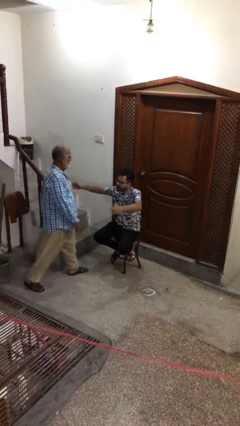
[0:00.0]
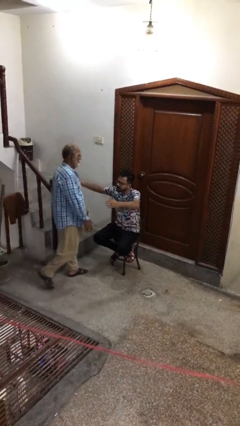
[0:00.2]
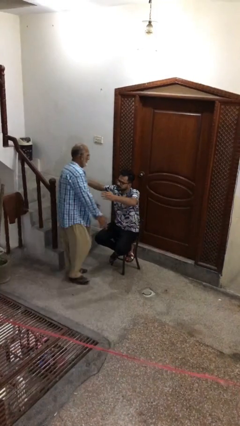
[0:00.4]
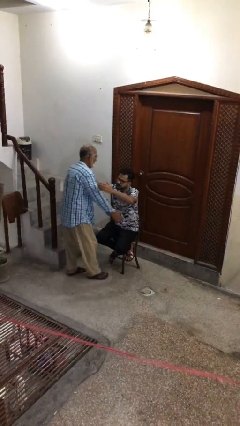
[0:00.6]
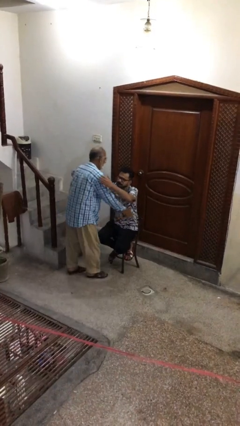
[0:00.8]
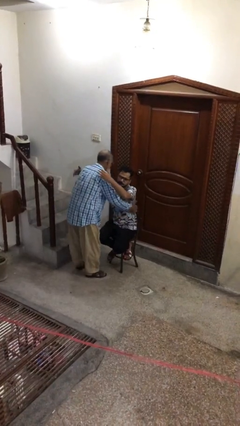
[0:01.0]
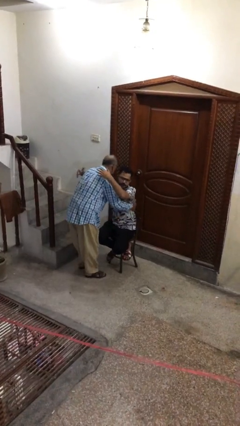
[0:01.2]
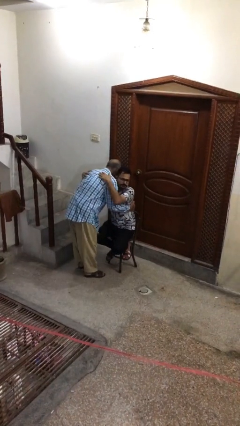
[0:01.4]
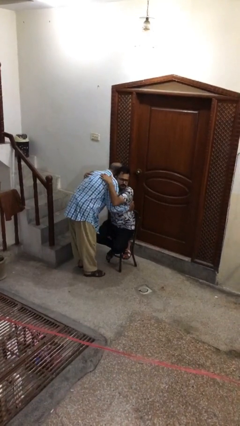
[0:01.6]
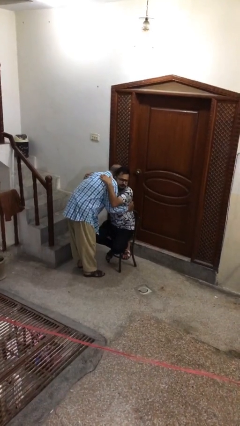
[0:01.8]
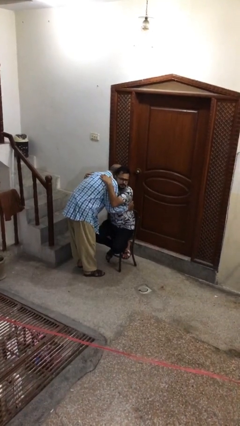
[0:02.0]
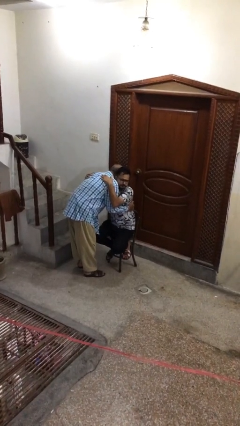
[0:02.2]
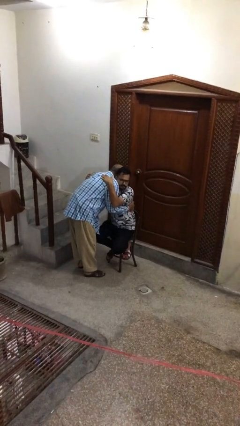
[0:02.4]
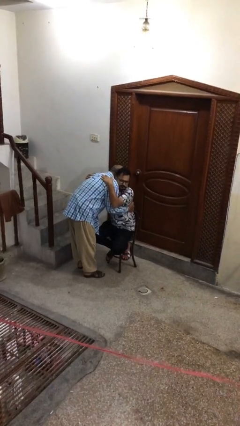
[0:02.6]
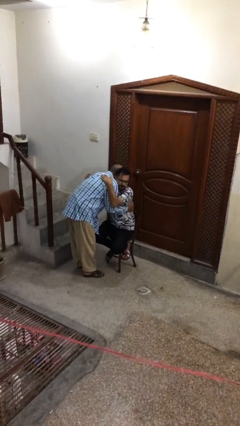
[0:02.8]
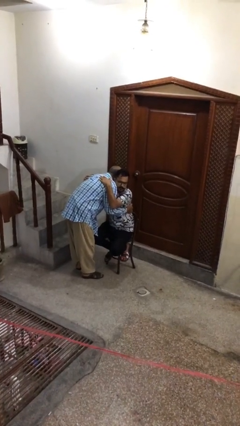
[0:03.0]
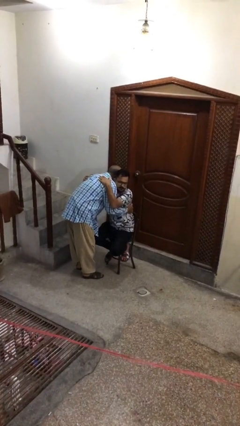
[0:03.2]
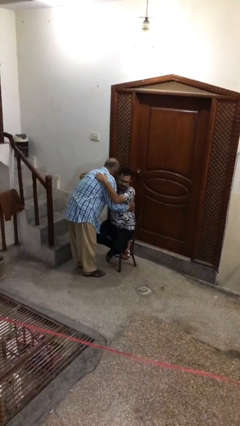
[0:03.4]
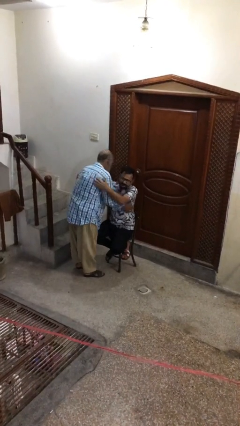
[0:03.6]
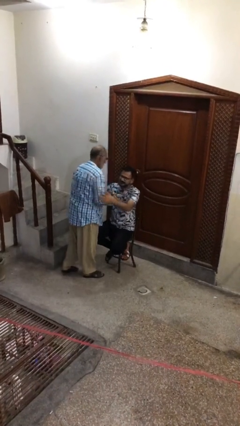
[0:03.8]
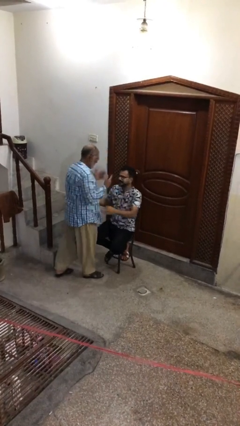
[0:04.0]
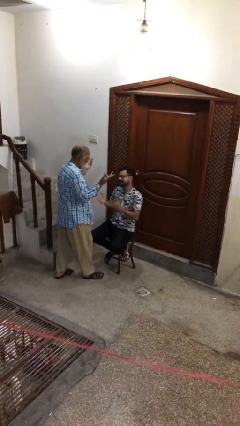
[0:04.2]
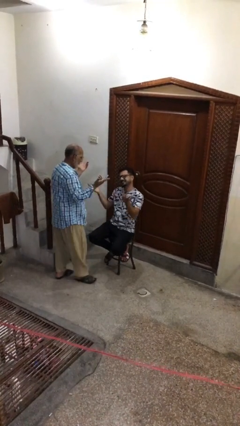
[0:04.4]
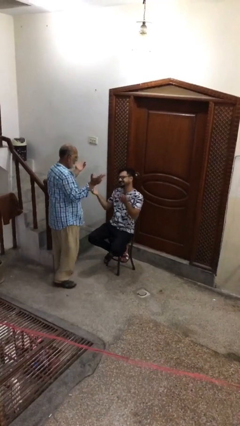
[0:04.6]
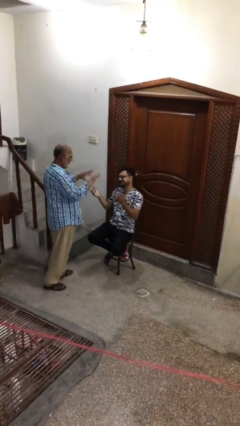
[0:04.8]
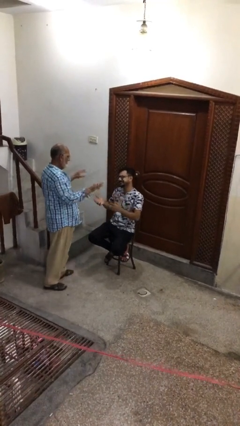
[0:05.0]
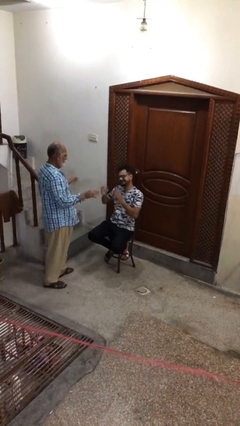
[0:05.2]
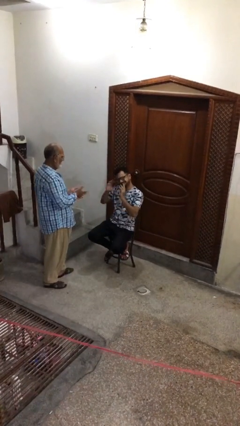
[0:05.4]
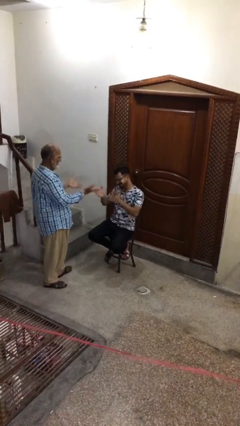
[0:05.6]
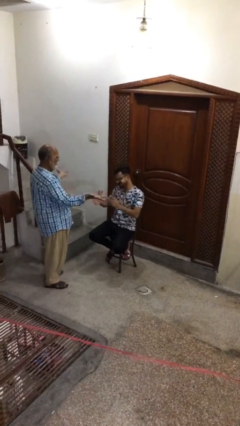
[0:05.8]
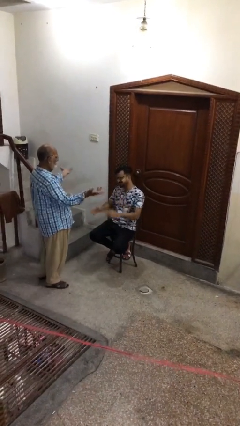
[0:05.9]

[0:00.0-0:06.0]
person embraces person

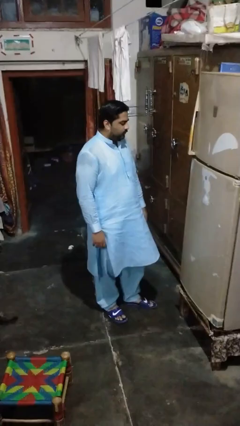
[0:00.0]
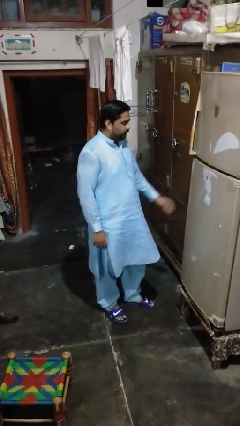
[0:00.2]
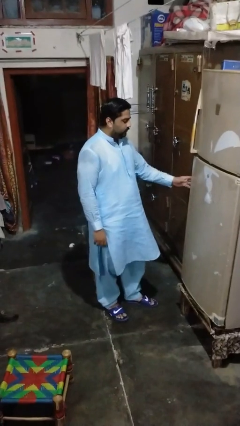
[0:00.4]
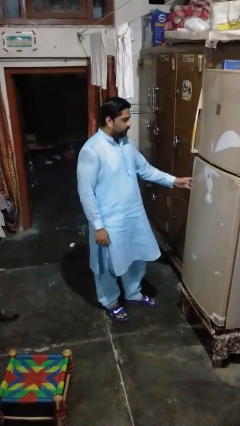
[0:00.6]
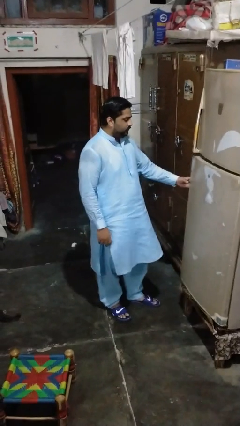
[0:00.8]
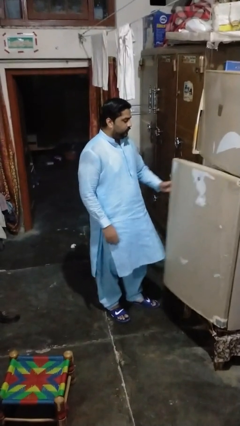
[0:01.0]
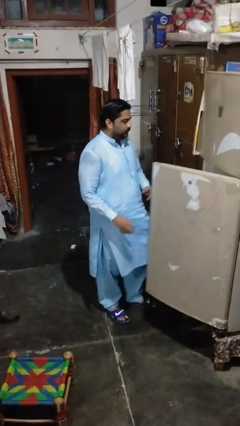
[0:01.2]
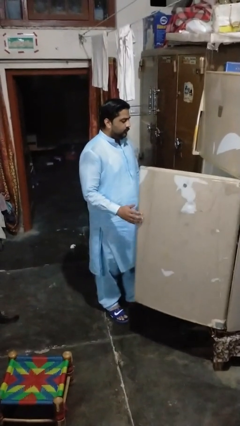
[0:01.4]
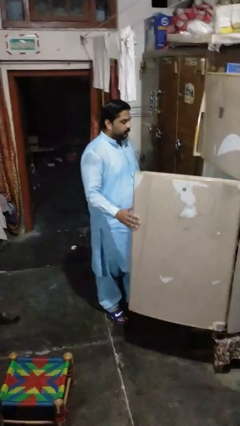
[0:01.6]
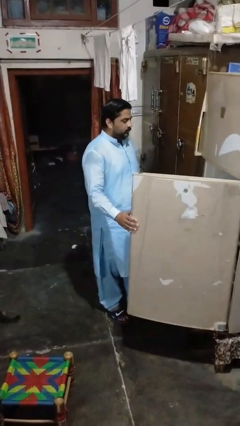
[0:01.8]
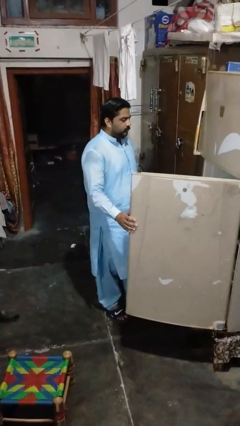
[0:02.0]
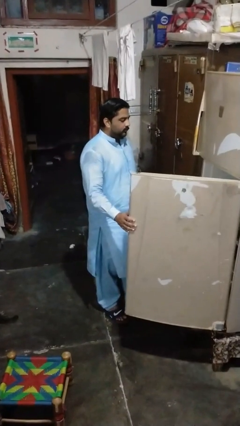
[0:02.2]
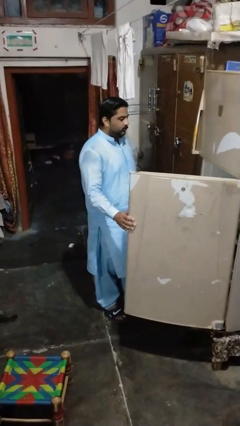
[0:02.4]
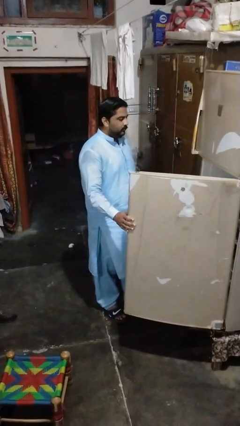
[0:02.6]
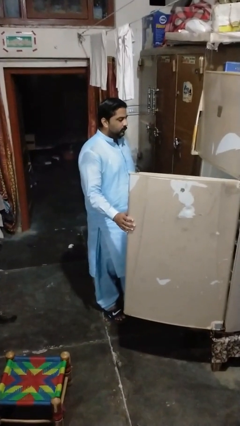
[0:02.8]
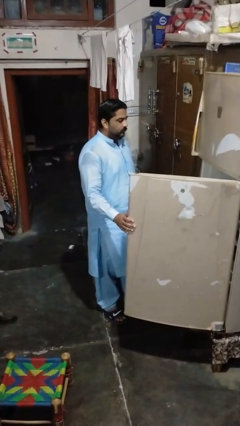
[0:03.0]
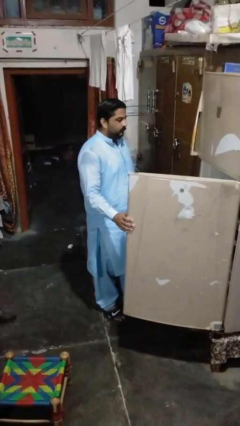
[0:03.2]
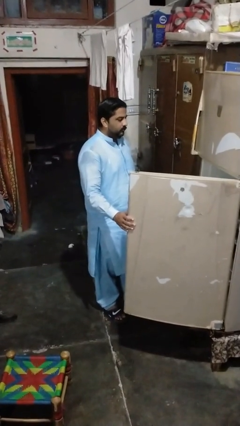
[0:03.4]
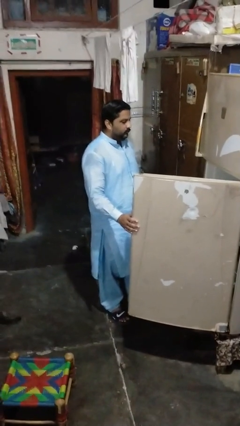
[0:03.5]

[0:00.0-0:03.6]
person opens refrigerator

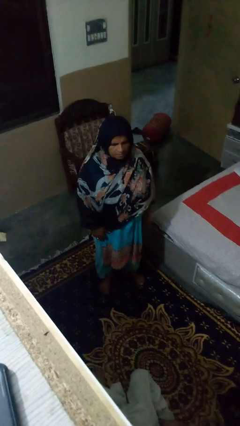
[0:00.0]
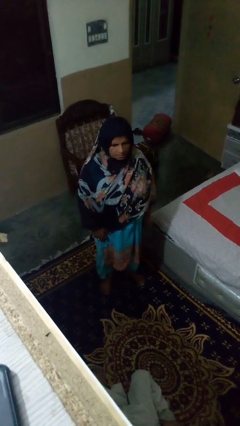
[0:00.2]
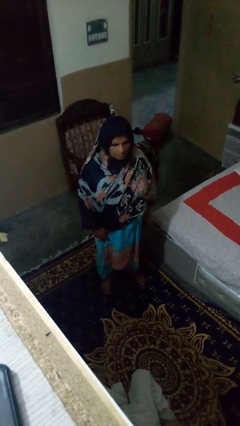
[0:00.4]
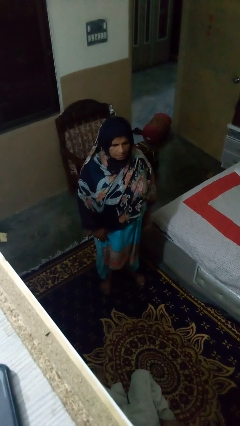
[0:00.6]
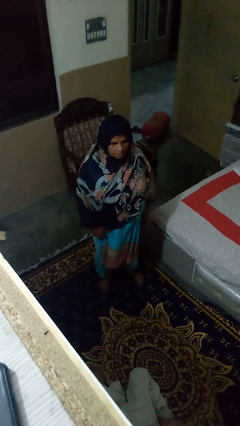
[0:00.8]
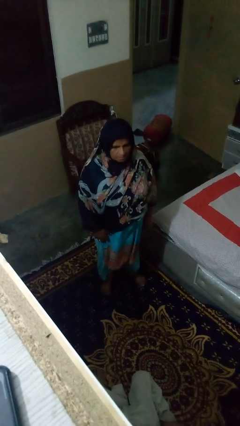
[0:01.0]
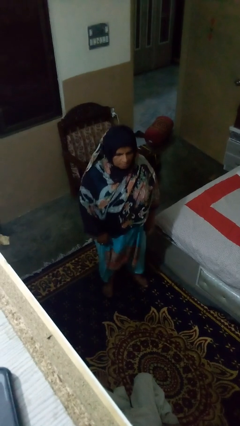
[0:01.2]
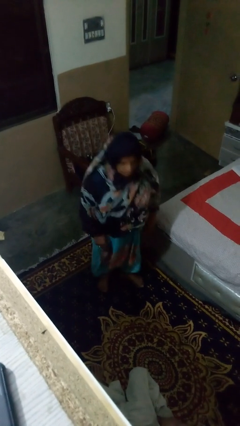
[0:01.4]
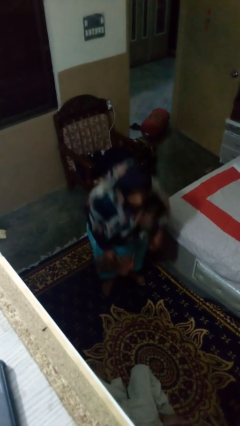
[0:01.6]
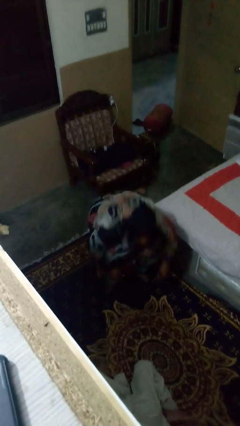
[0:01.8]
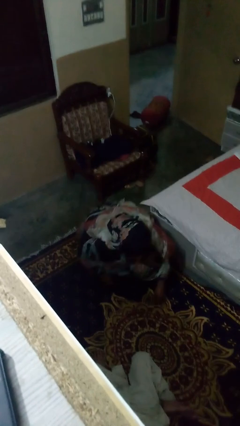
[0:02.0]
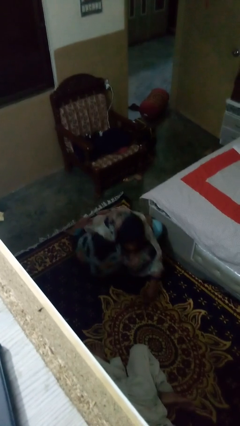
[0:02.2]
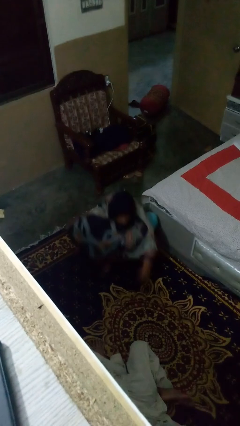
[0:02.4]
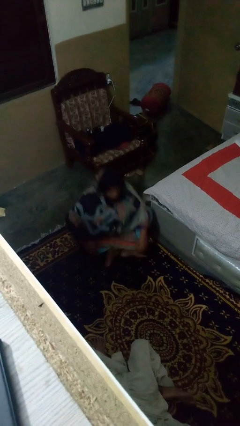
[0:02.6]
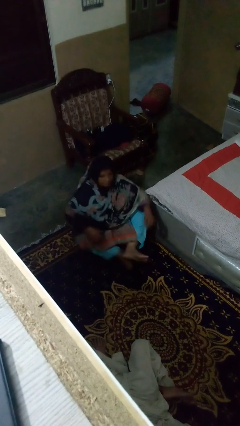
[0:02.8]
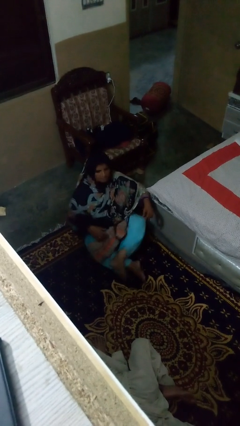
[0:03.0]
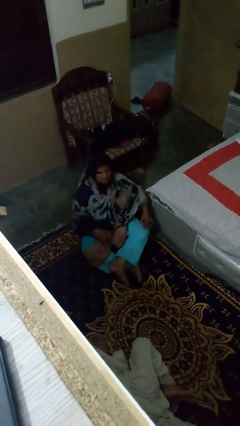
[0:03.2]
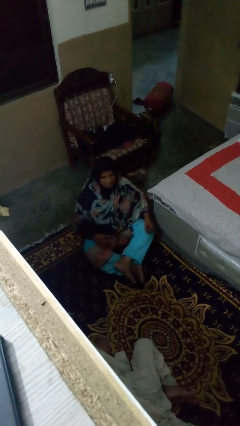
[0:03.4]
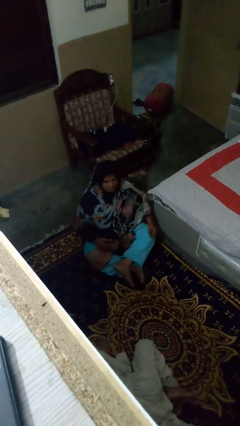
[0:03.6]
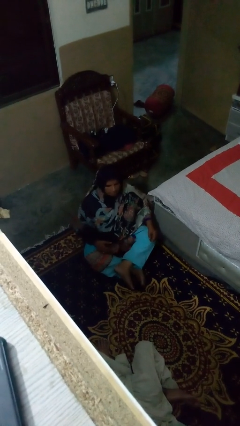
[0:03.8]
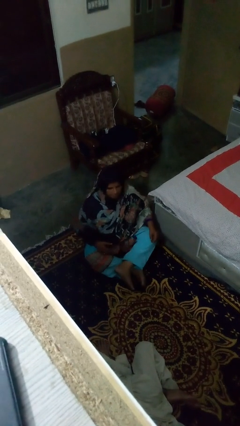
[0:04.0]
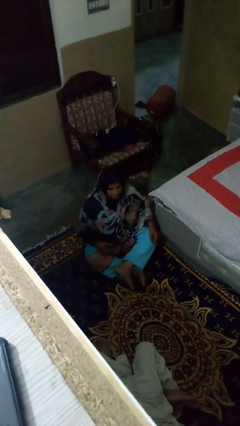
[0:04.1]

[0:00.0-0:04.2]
person sits crisscross

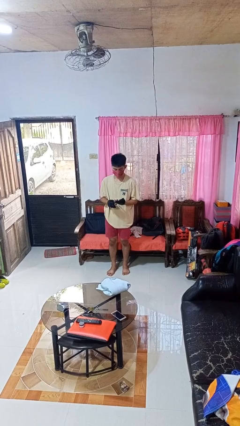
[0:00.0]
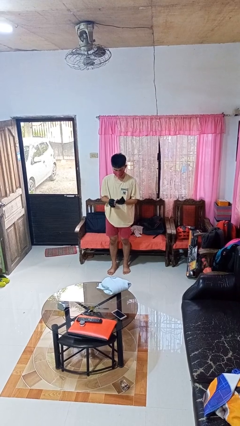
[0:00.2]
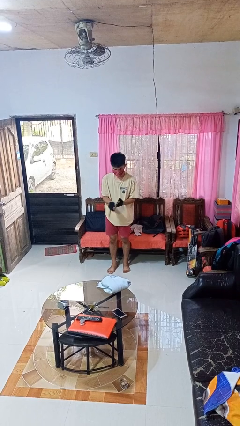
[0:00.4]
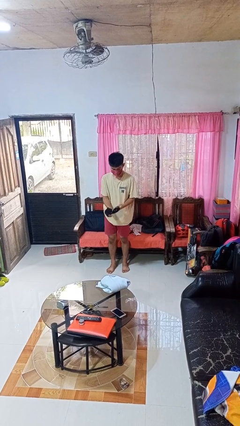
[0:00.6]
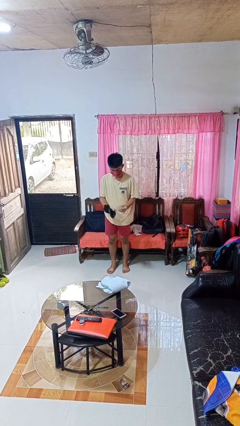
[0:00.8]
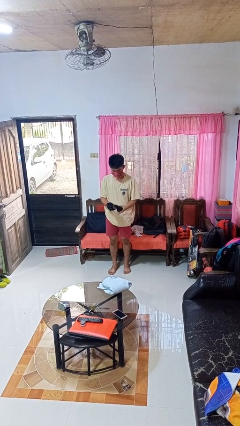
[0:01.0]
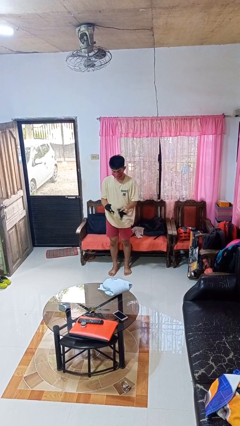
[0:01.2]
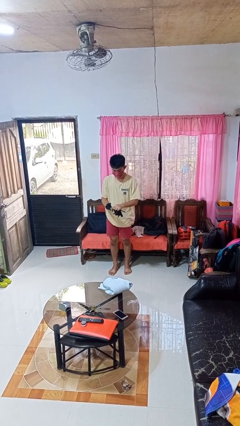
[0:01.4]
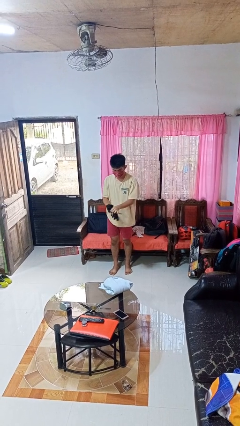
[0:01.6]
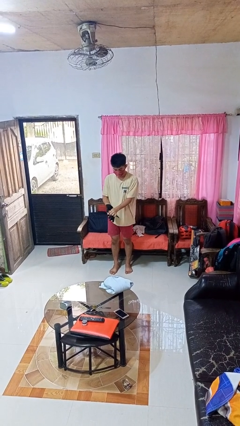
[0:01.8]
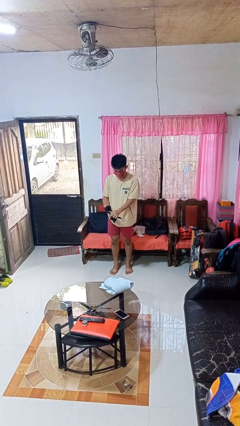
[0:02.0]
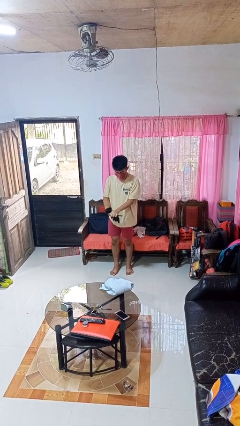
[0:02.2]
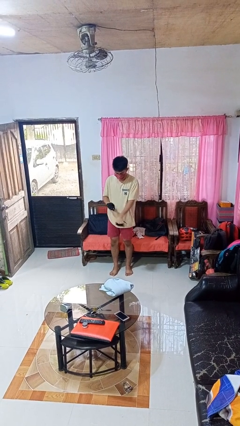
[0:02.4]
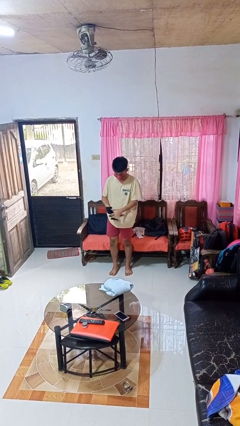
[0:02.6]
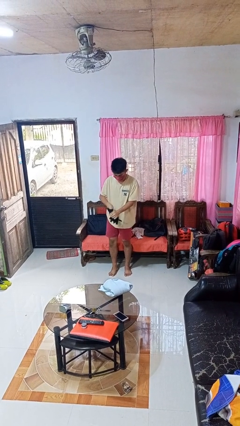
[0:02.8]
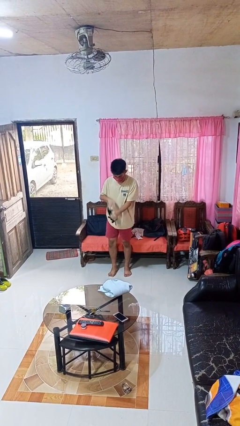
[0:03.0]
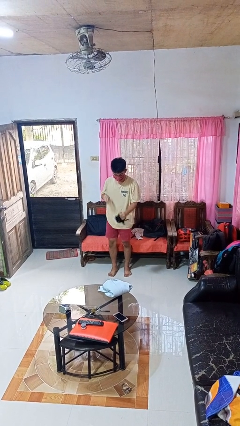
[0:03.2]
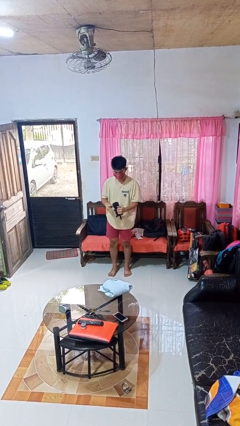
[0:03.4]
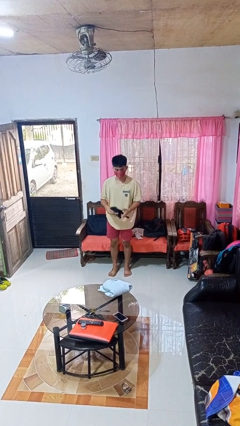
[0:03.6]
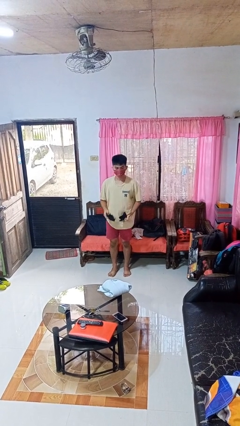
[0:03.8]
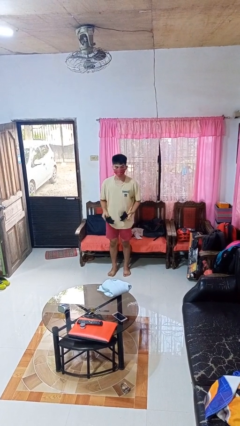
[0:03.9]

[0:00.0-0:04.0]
person takes off gloves
